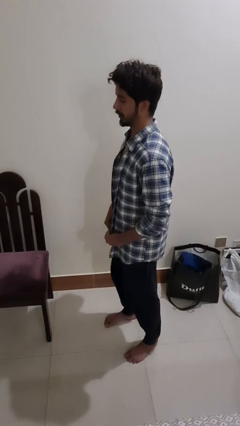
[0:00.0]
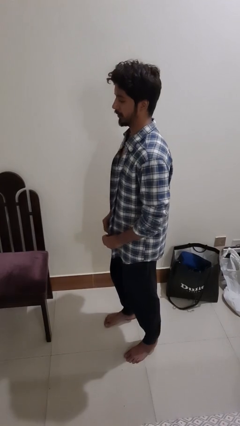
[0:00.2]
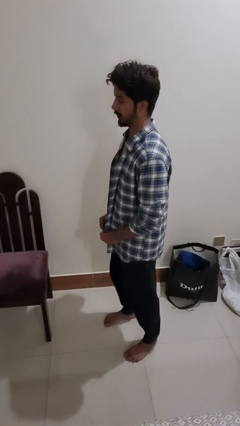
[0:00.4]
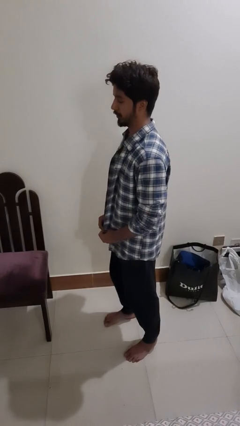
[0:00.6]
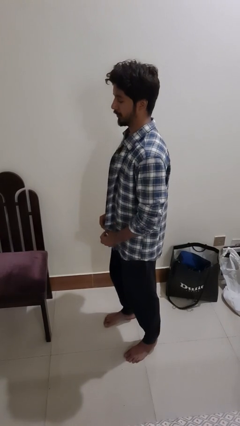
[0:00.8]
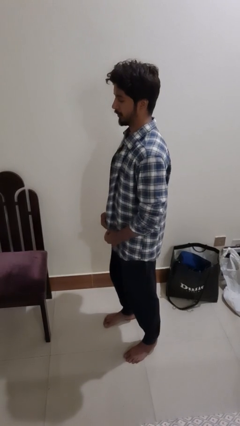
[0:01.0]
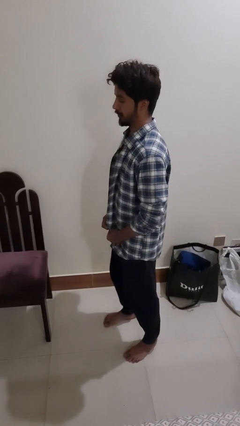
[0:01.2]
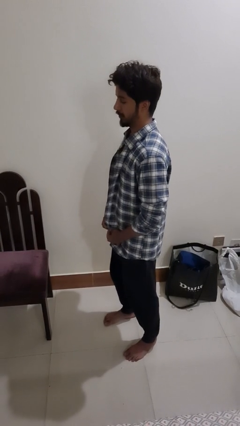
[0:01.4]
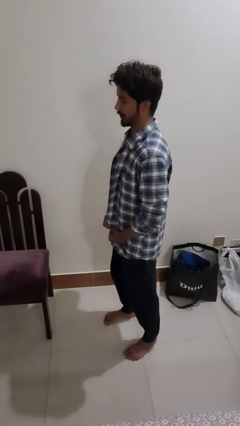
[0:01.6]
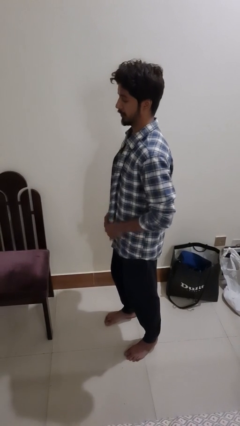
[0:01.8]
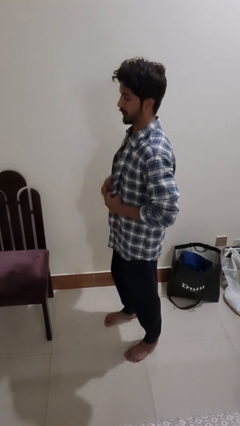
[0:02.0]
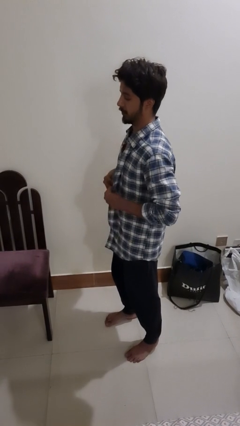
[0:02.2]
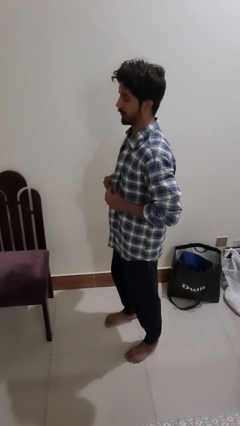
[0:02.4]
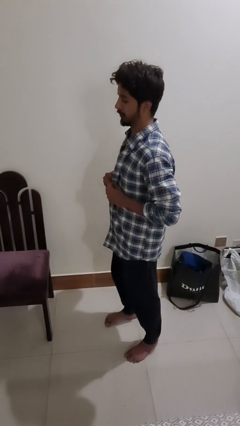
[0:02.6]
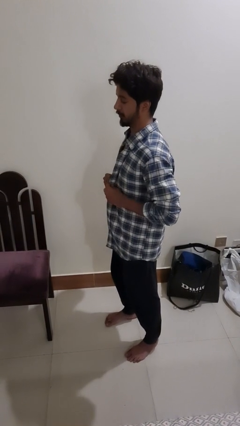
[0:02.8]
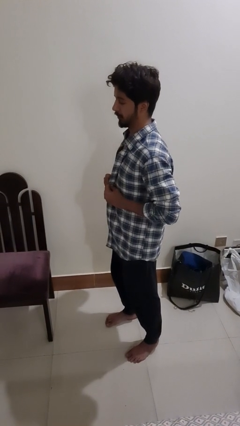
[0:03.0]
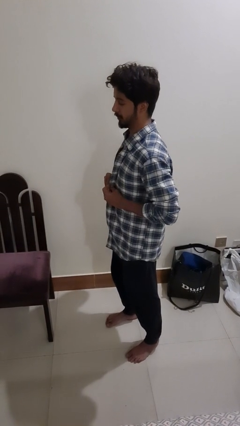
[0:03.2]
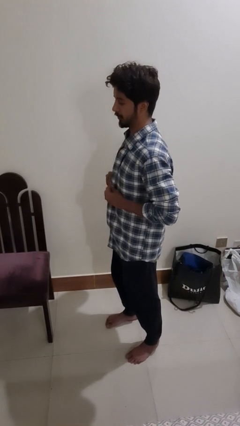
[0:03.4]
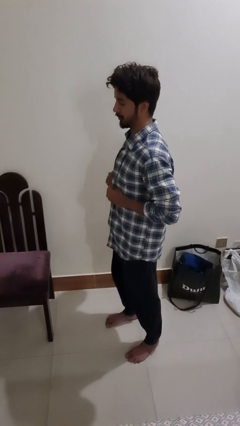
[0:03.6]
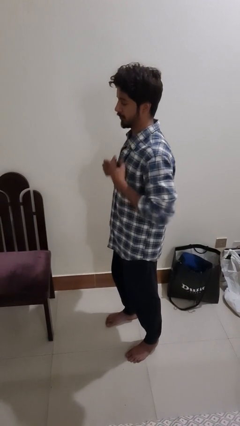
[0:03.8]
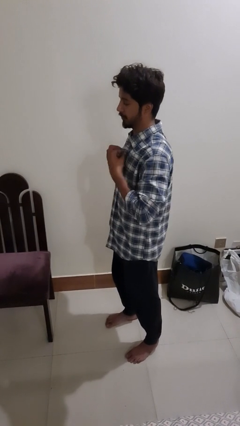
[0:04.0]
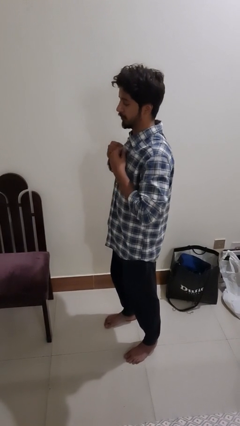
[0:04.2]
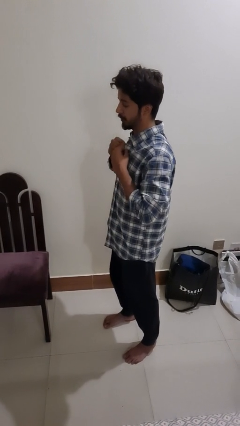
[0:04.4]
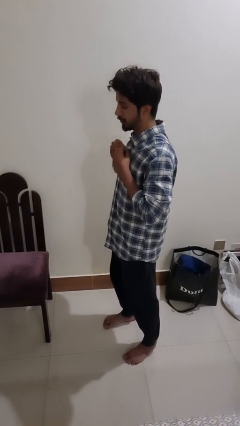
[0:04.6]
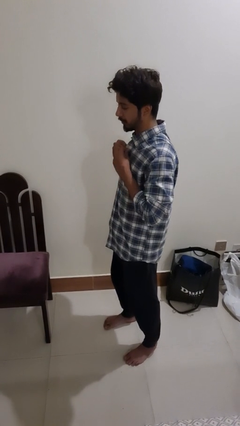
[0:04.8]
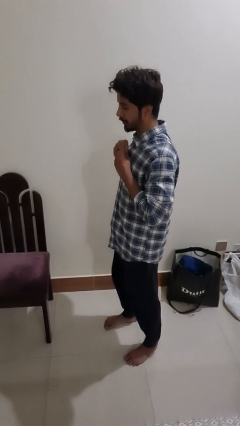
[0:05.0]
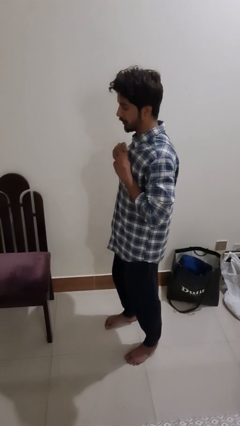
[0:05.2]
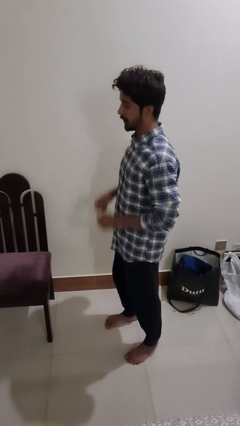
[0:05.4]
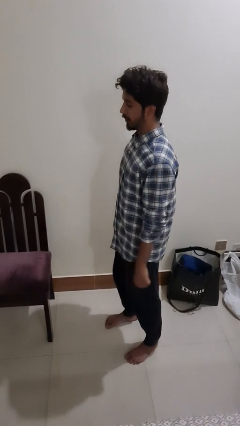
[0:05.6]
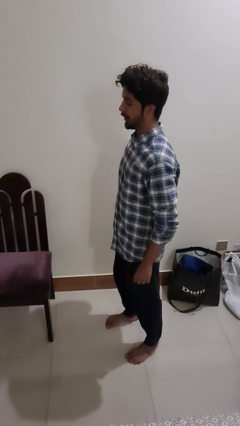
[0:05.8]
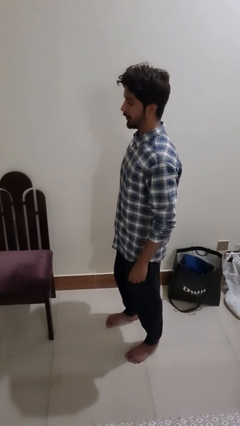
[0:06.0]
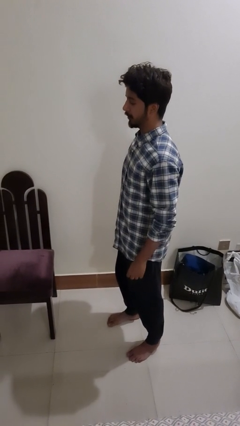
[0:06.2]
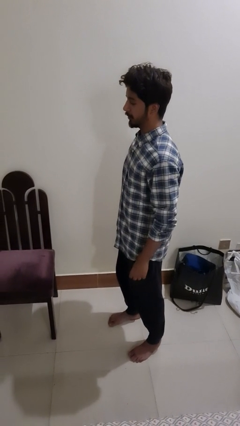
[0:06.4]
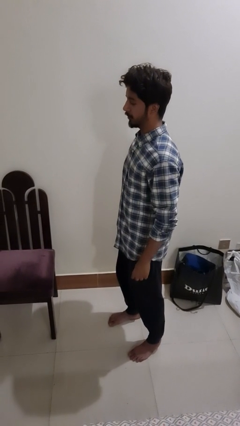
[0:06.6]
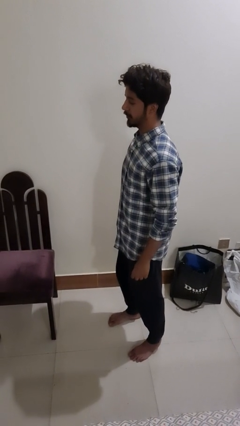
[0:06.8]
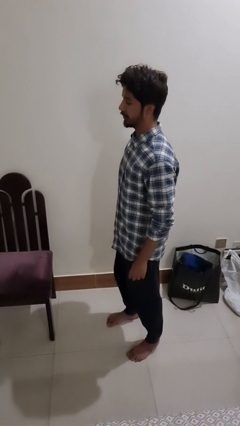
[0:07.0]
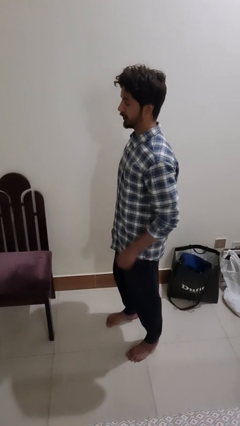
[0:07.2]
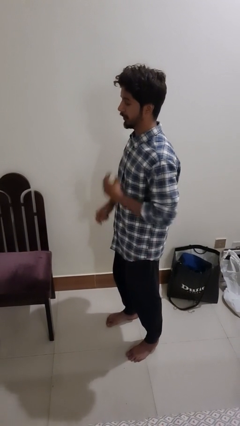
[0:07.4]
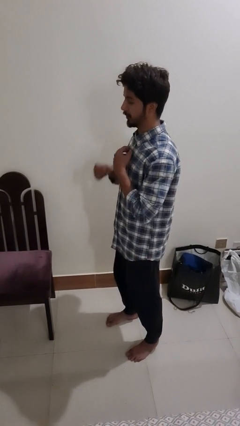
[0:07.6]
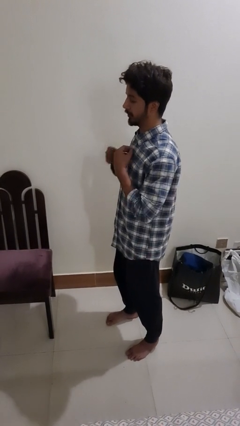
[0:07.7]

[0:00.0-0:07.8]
person buttons shirt

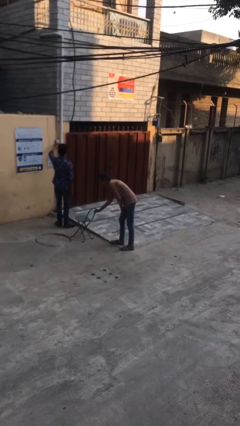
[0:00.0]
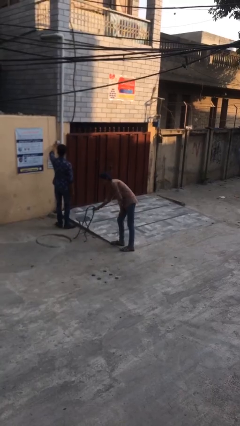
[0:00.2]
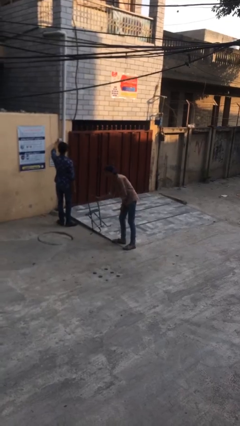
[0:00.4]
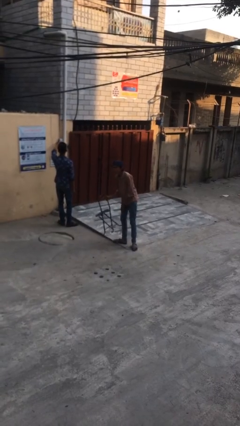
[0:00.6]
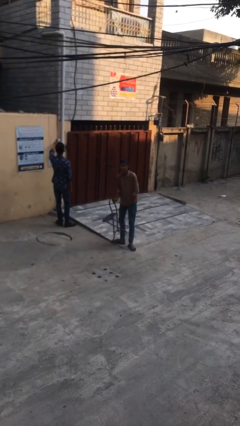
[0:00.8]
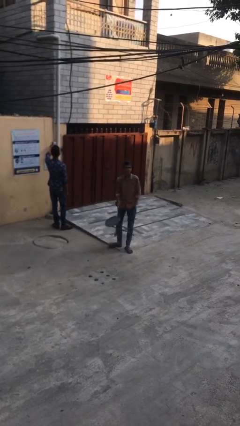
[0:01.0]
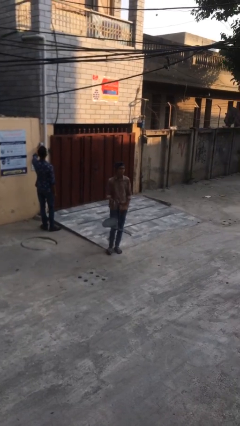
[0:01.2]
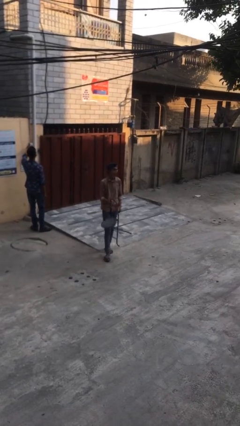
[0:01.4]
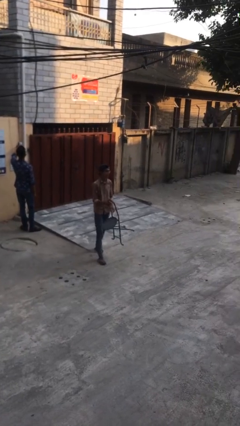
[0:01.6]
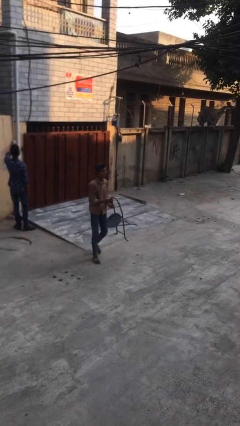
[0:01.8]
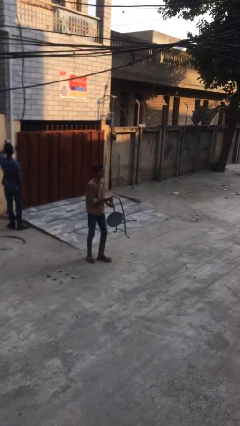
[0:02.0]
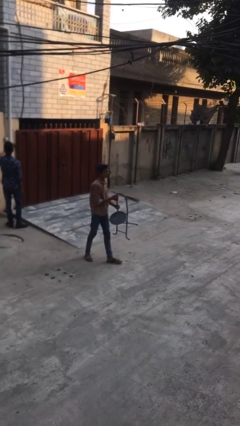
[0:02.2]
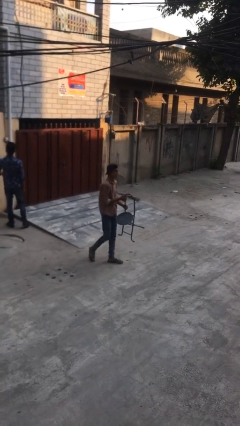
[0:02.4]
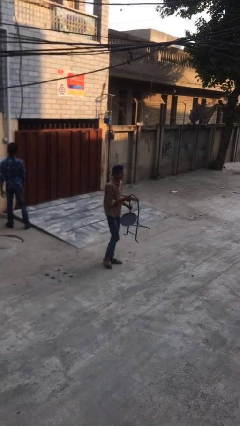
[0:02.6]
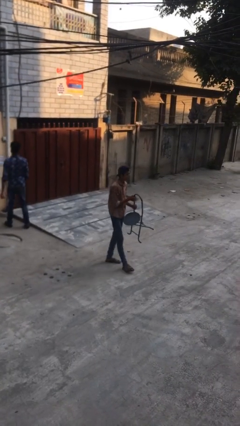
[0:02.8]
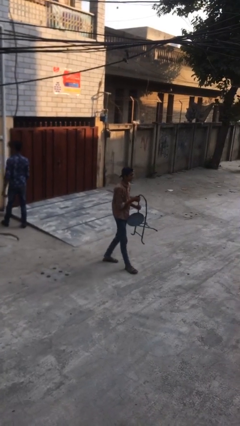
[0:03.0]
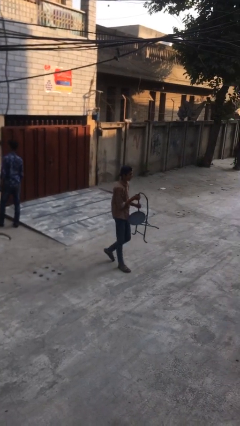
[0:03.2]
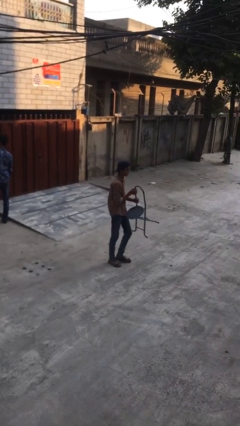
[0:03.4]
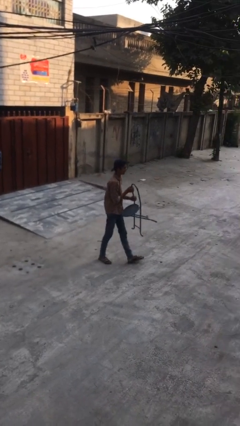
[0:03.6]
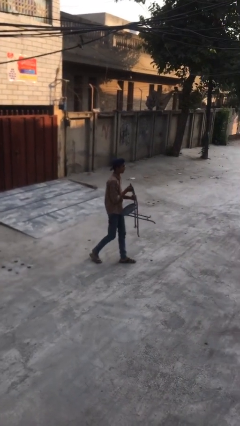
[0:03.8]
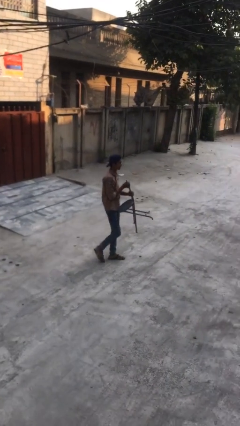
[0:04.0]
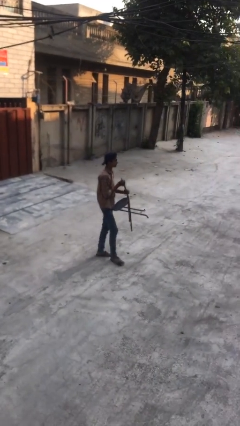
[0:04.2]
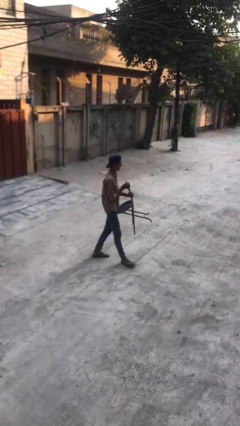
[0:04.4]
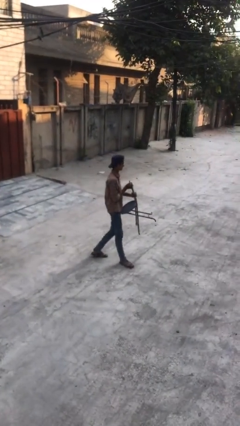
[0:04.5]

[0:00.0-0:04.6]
person steals object from person

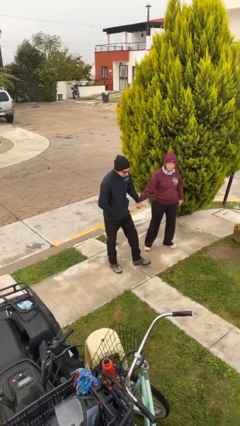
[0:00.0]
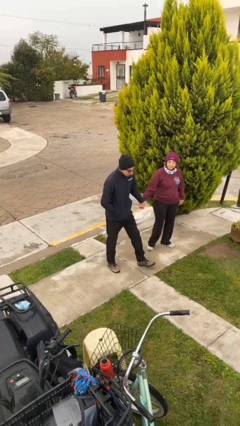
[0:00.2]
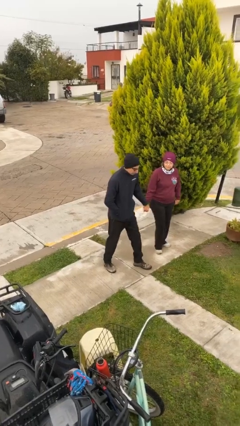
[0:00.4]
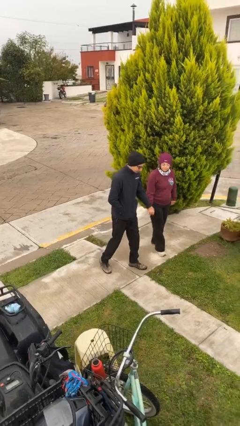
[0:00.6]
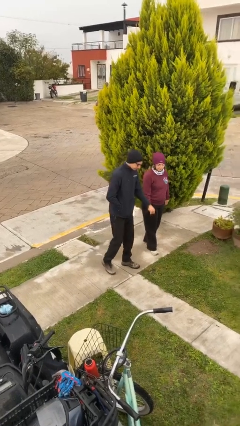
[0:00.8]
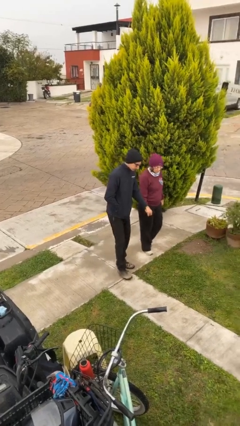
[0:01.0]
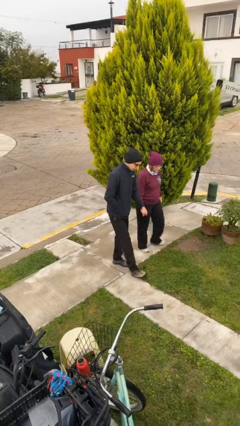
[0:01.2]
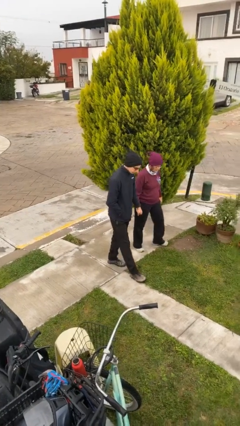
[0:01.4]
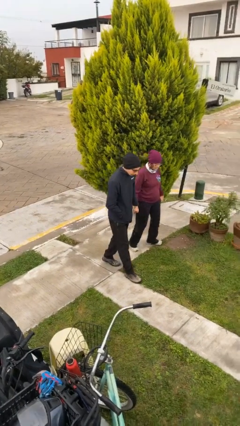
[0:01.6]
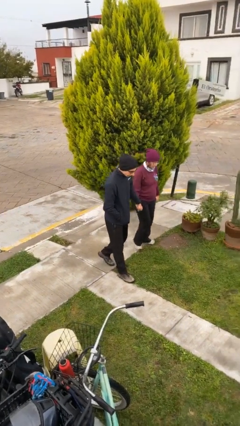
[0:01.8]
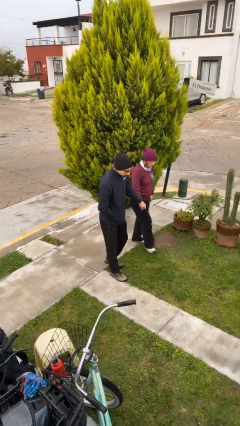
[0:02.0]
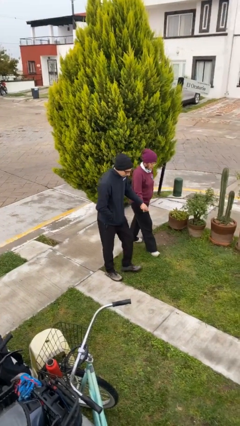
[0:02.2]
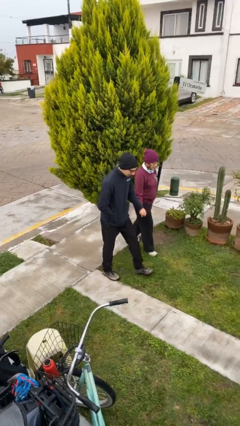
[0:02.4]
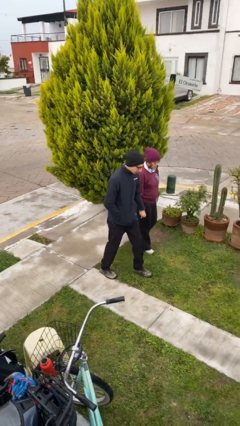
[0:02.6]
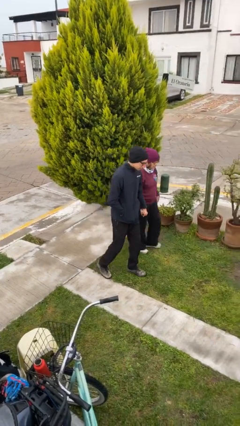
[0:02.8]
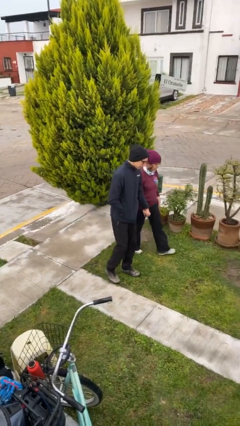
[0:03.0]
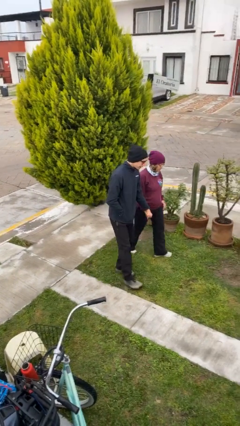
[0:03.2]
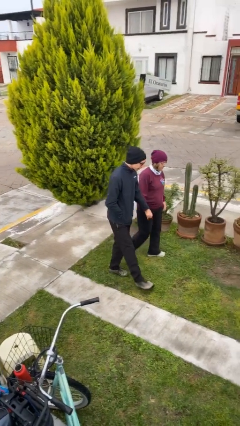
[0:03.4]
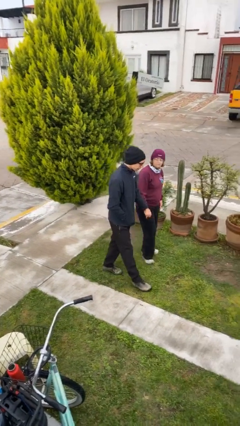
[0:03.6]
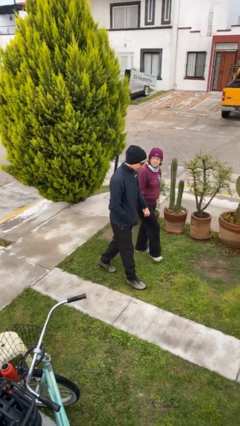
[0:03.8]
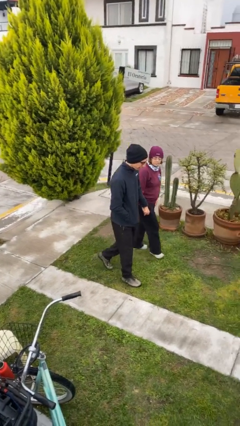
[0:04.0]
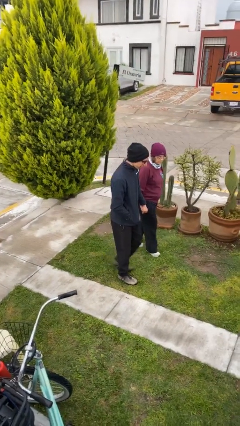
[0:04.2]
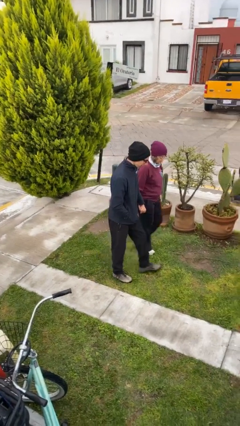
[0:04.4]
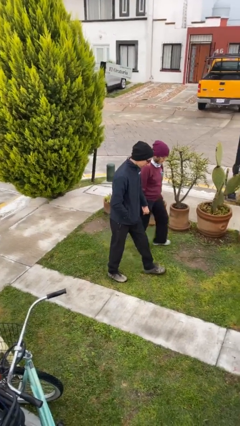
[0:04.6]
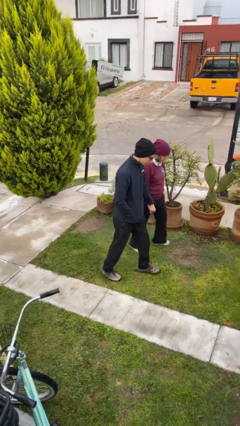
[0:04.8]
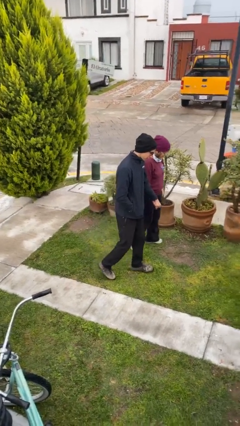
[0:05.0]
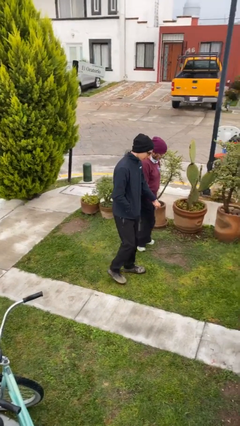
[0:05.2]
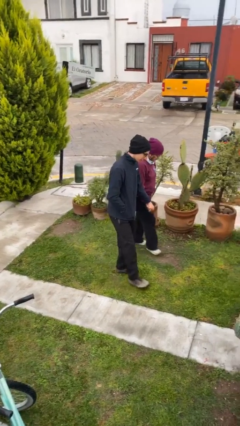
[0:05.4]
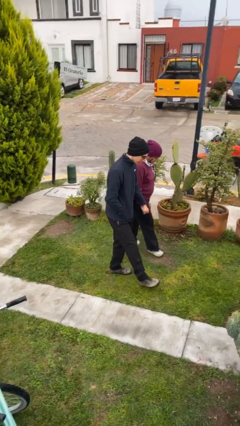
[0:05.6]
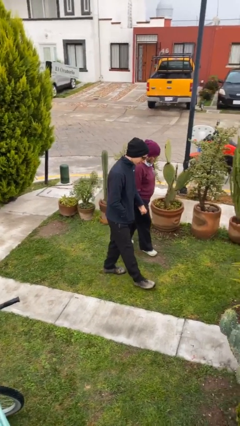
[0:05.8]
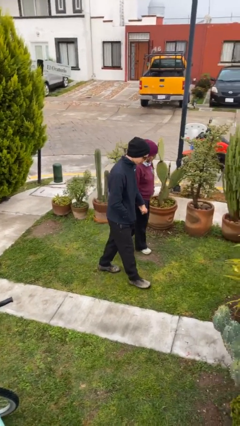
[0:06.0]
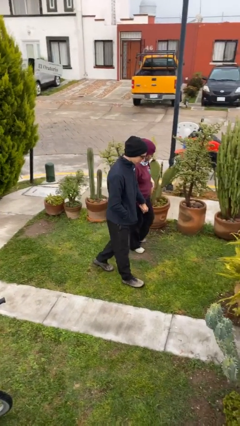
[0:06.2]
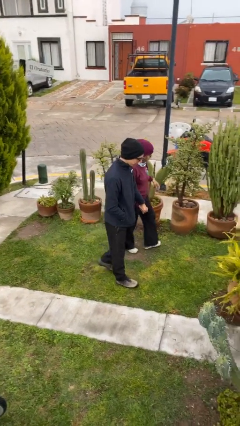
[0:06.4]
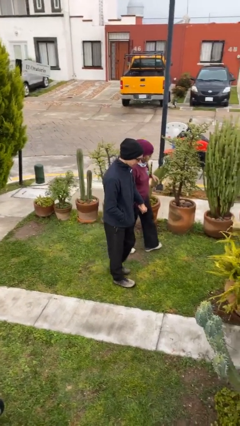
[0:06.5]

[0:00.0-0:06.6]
person holds hand
